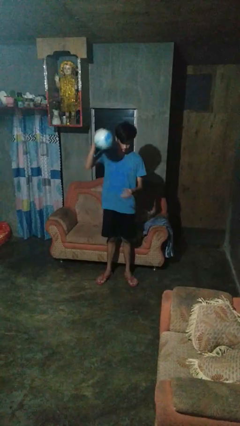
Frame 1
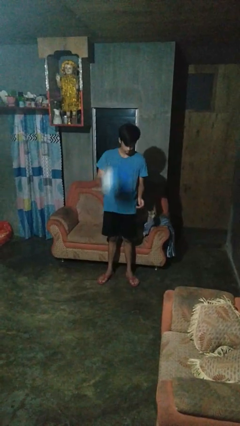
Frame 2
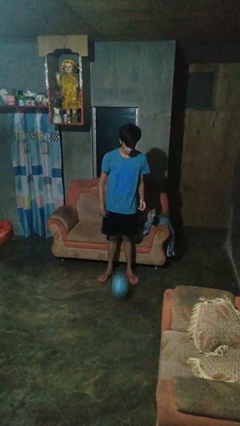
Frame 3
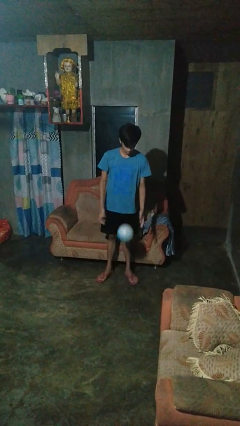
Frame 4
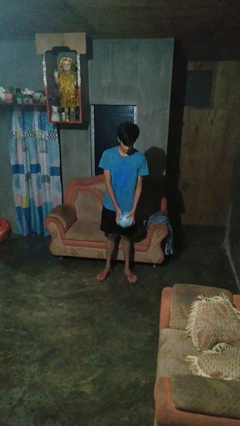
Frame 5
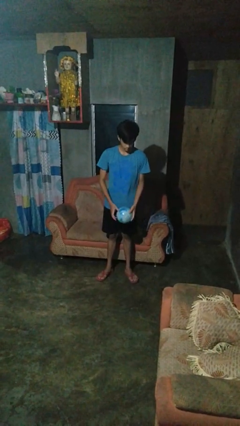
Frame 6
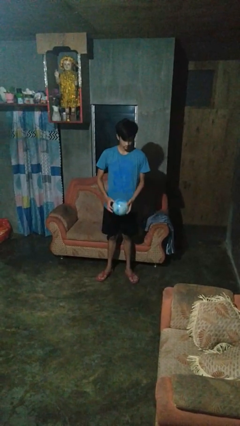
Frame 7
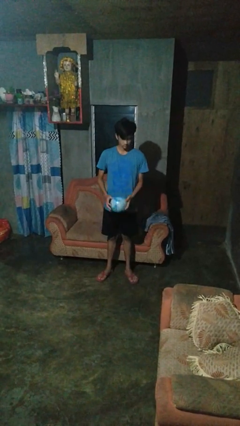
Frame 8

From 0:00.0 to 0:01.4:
person bounces ball on floor

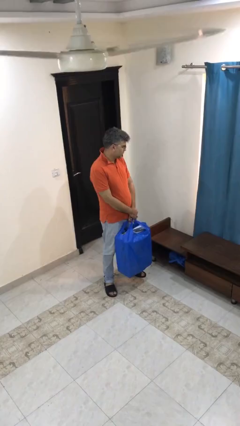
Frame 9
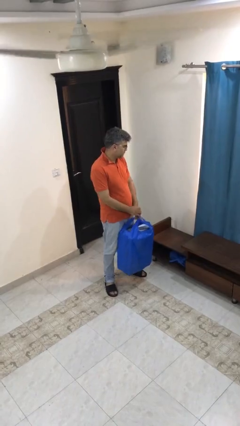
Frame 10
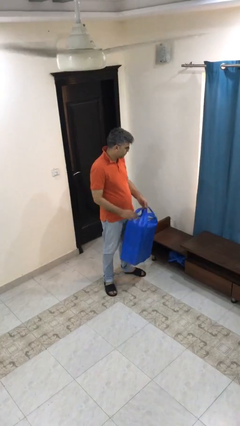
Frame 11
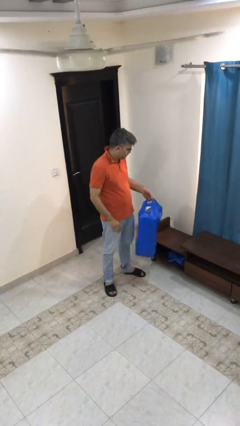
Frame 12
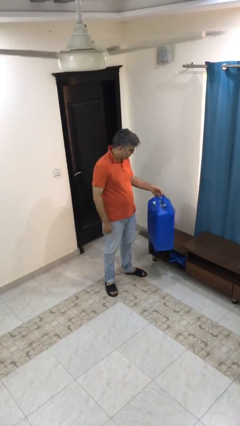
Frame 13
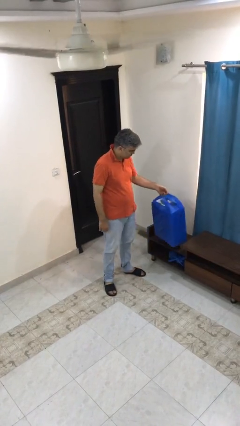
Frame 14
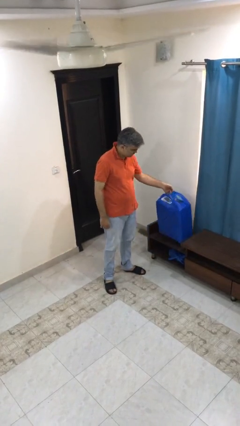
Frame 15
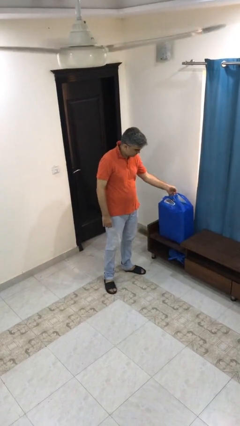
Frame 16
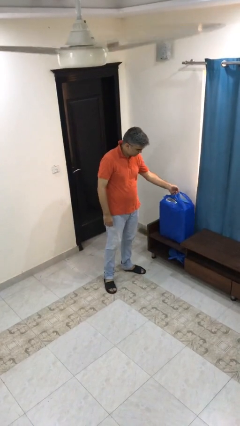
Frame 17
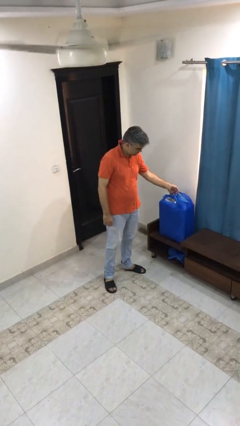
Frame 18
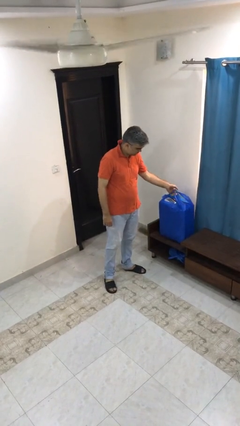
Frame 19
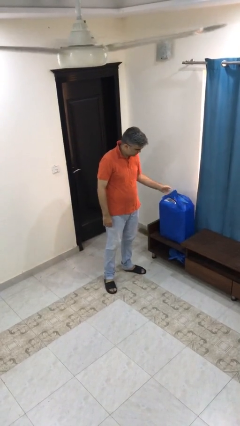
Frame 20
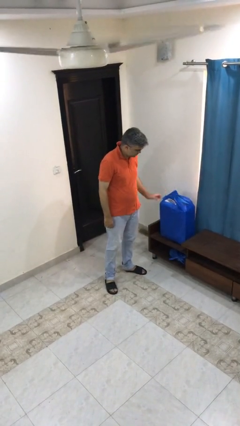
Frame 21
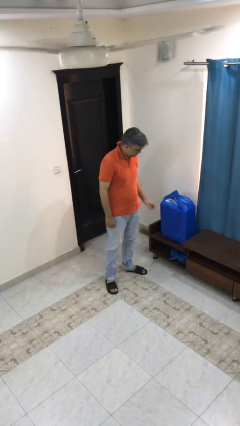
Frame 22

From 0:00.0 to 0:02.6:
person puts down object on table

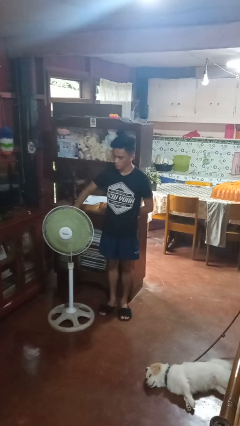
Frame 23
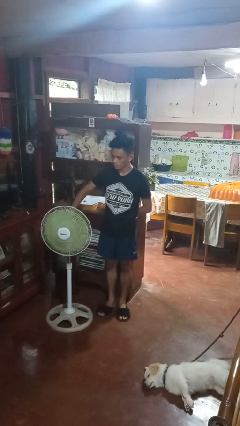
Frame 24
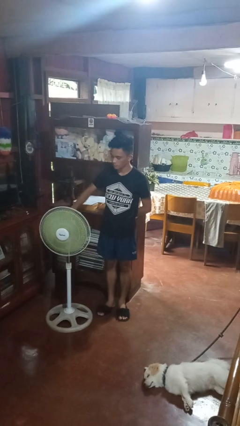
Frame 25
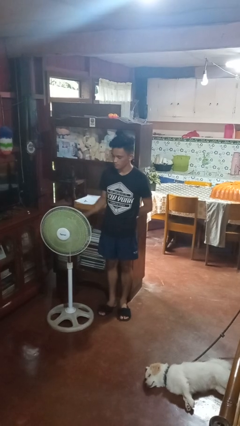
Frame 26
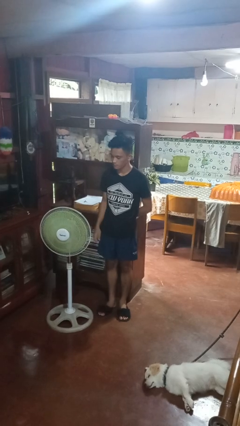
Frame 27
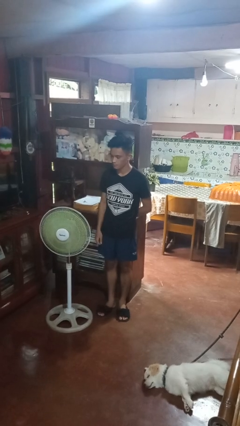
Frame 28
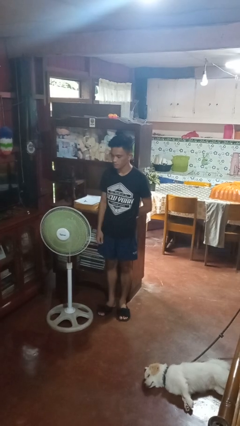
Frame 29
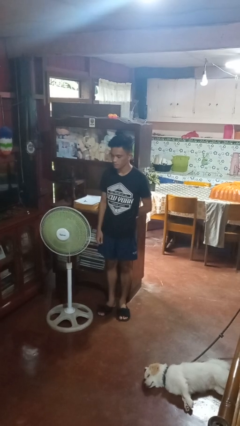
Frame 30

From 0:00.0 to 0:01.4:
person turns off fan

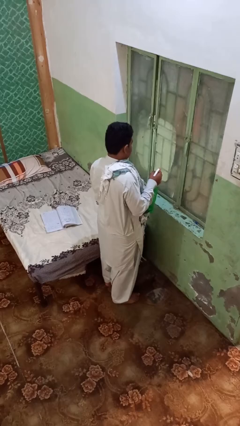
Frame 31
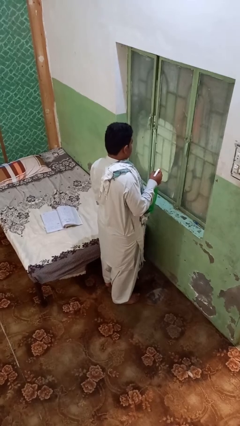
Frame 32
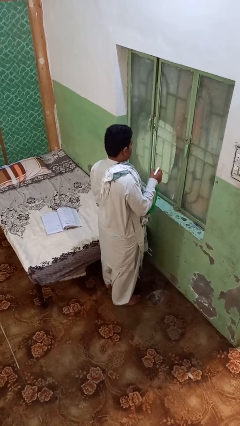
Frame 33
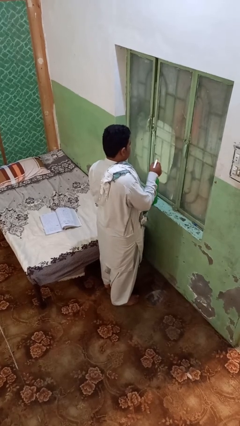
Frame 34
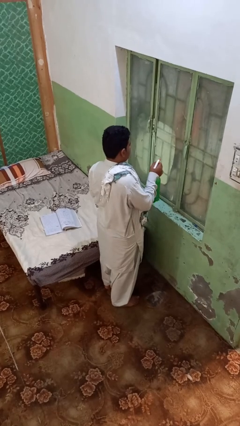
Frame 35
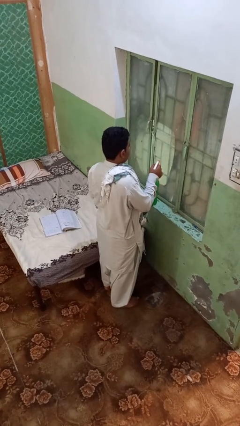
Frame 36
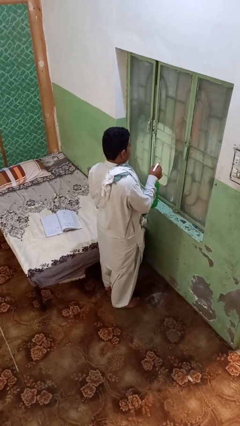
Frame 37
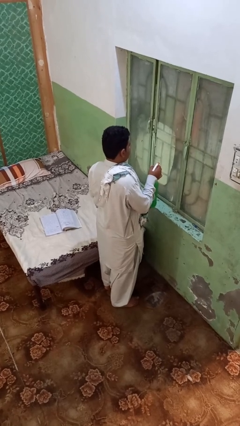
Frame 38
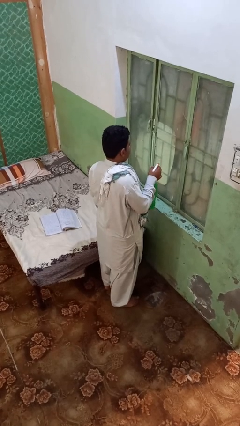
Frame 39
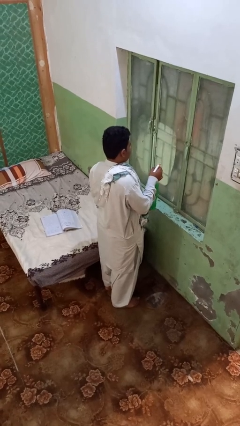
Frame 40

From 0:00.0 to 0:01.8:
person sprays from bottle

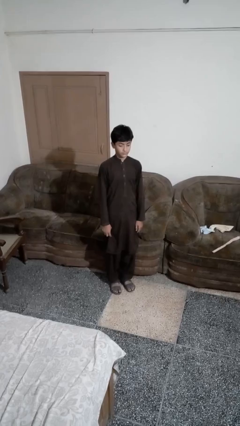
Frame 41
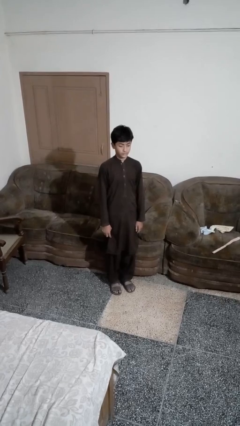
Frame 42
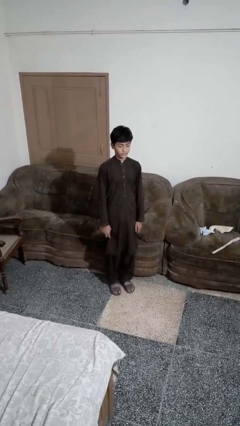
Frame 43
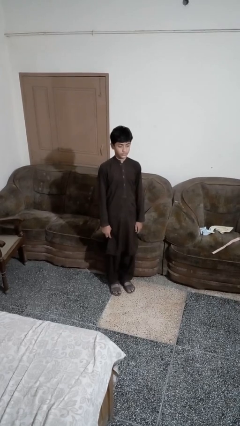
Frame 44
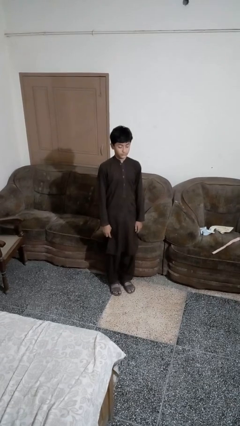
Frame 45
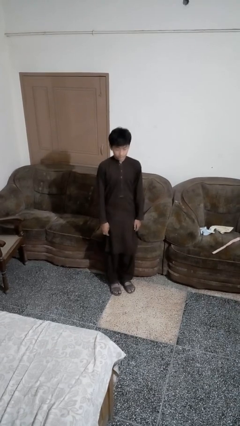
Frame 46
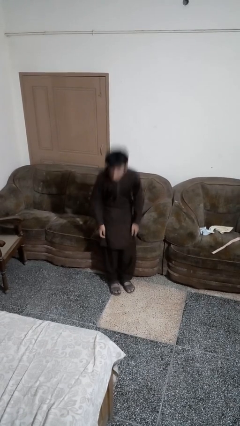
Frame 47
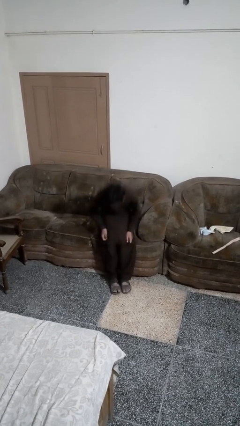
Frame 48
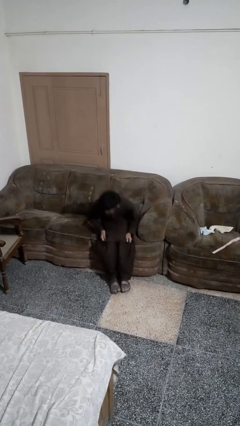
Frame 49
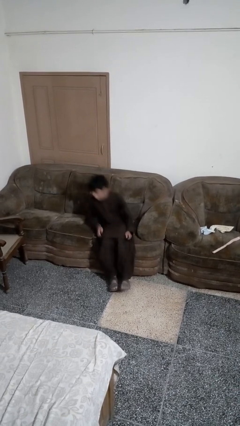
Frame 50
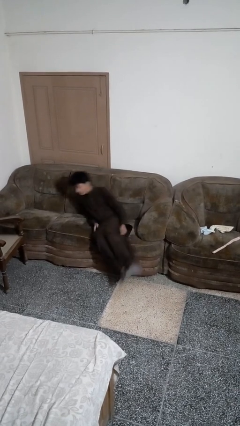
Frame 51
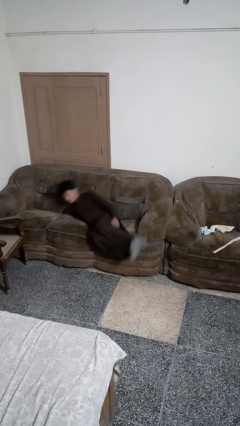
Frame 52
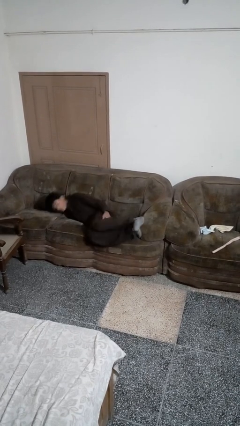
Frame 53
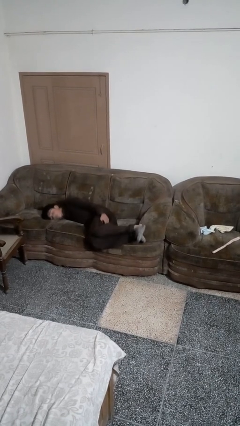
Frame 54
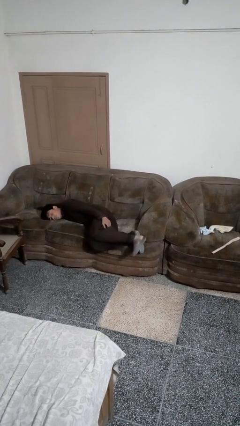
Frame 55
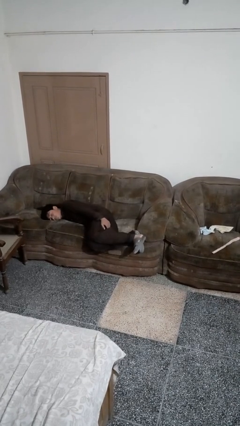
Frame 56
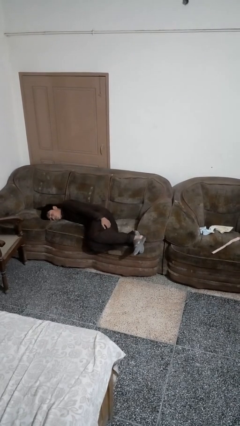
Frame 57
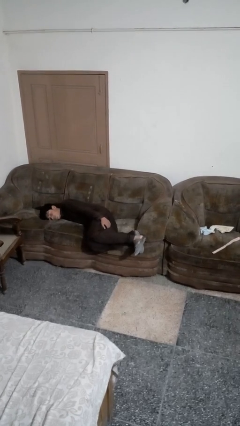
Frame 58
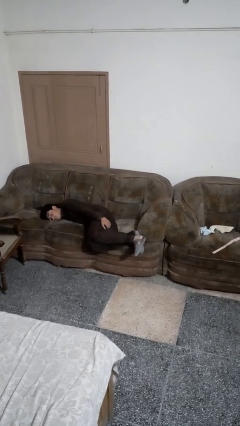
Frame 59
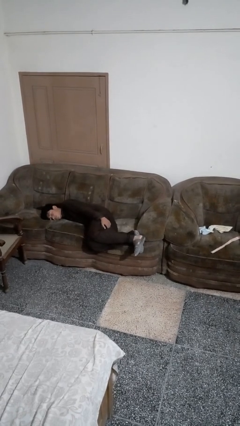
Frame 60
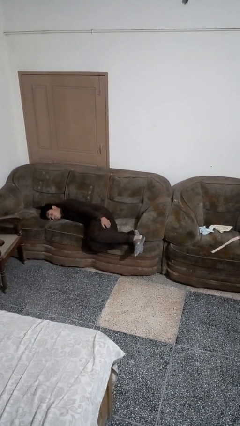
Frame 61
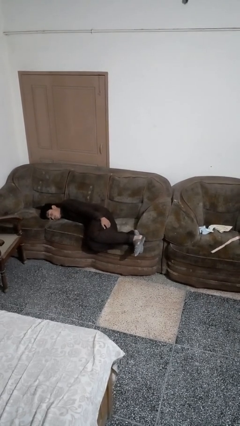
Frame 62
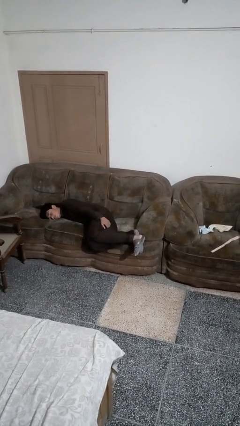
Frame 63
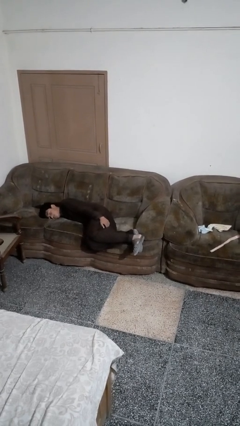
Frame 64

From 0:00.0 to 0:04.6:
person lies down on couch

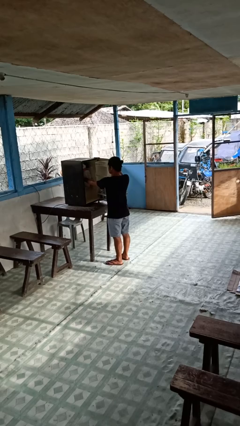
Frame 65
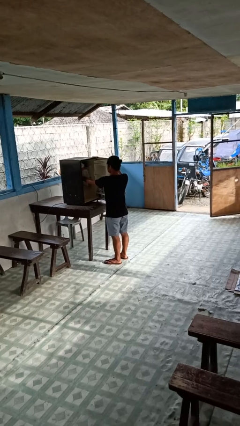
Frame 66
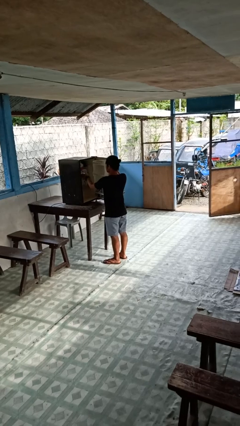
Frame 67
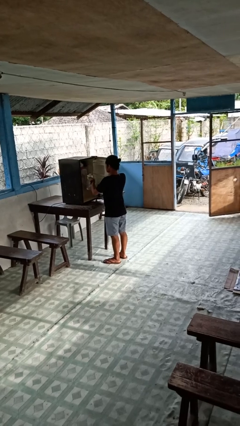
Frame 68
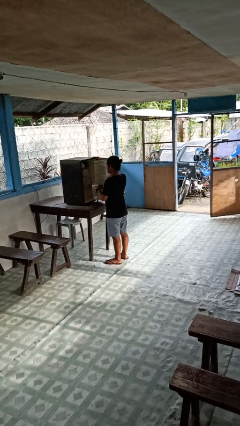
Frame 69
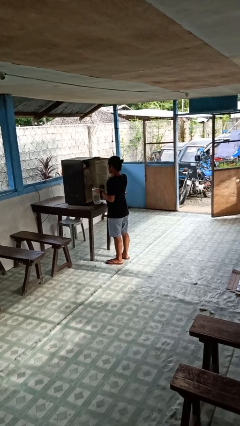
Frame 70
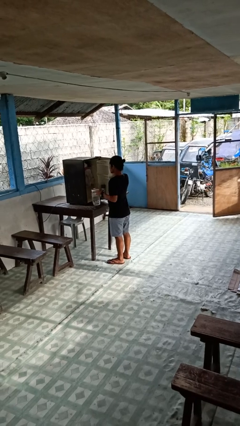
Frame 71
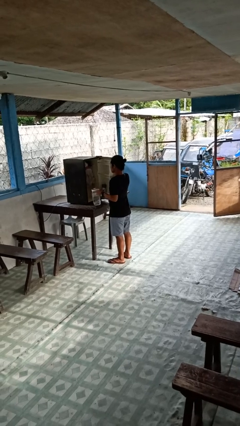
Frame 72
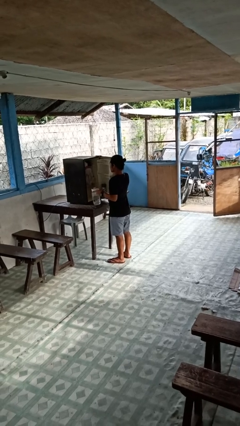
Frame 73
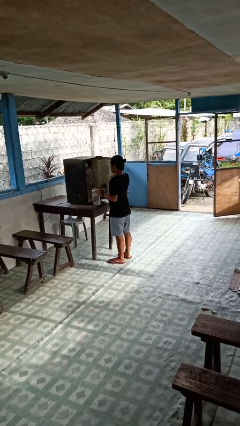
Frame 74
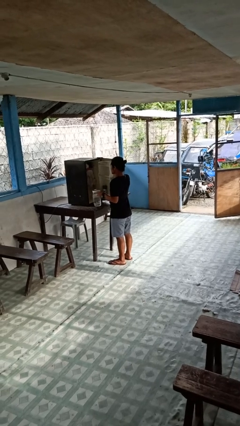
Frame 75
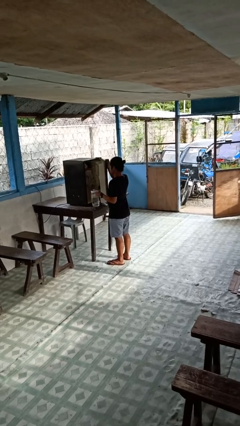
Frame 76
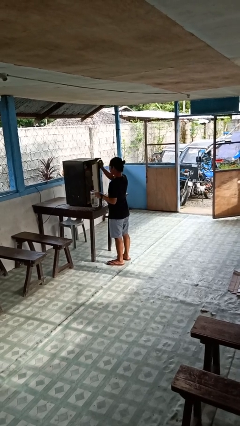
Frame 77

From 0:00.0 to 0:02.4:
person takes object from refrigerator

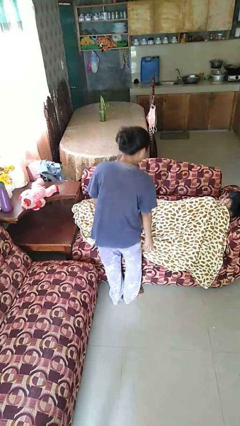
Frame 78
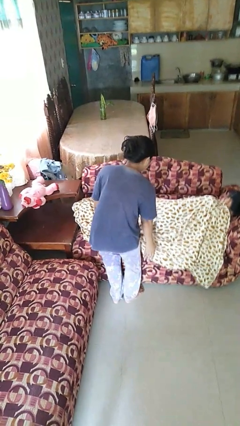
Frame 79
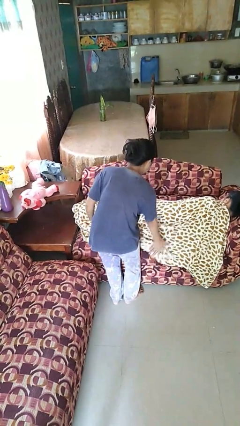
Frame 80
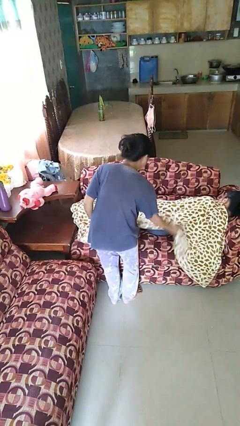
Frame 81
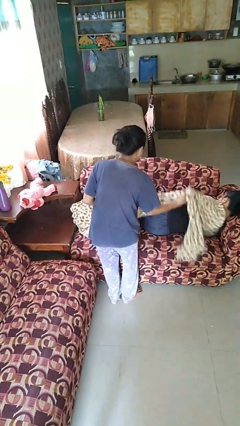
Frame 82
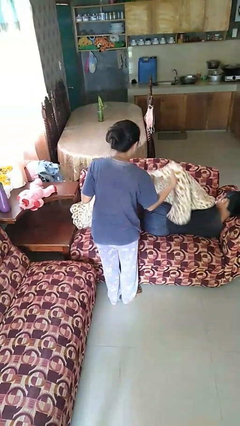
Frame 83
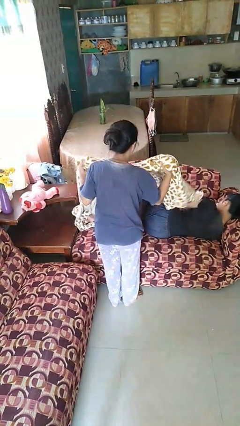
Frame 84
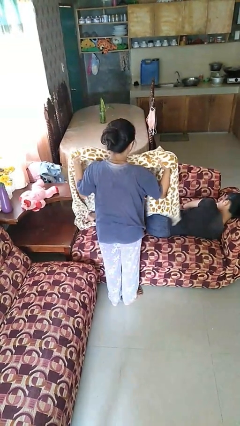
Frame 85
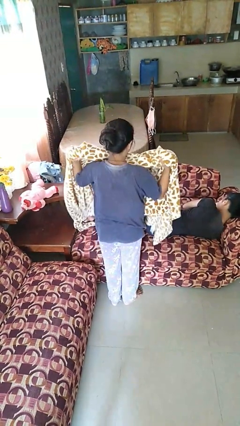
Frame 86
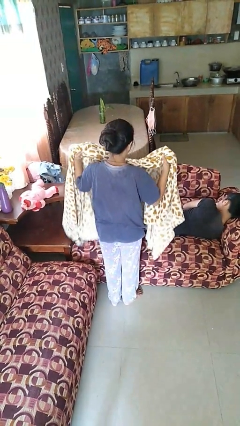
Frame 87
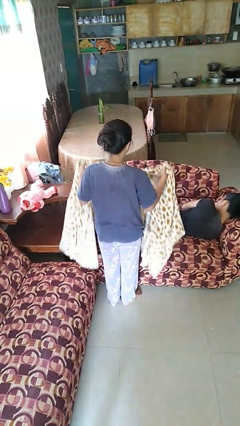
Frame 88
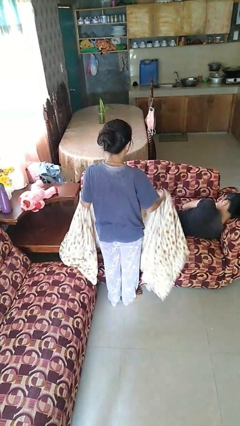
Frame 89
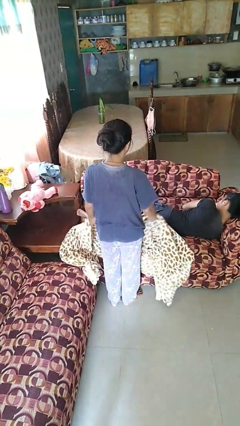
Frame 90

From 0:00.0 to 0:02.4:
person uncovers friend with blanket

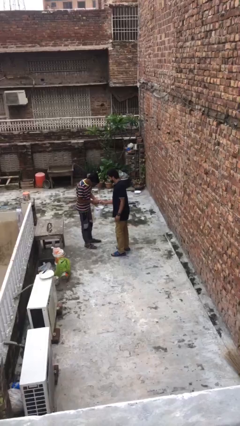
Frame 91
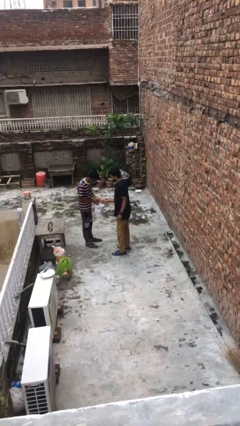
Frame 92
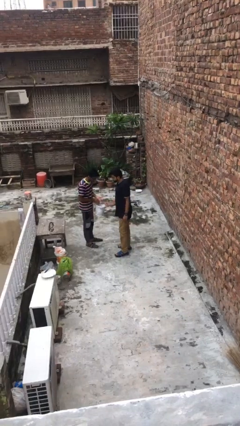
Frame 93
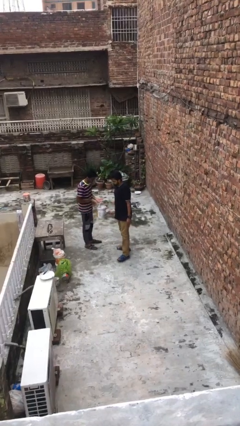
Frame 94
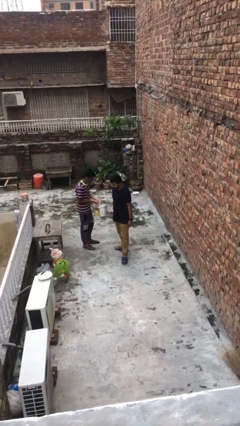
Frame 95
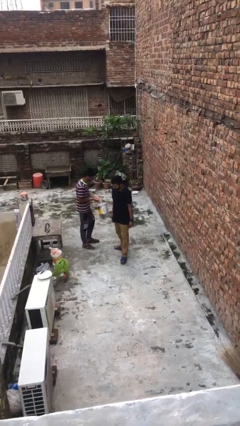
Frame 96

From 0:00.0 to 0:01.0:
person transfers object to person
